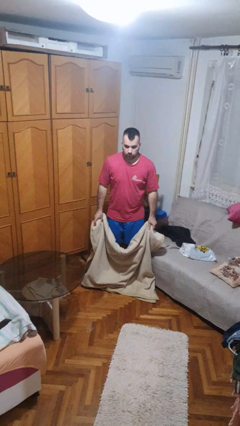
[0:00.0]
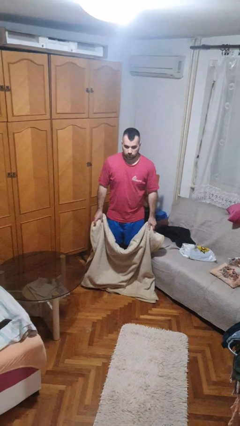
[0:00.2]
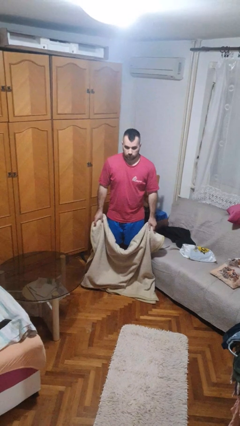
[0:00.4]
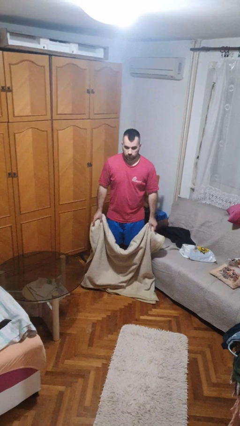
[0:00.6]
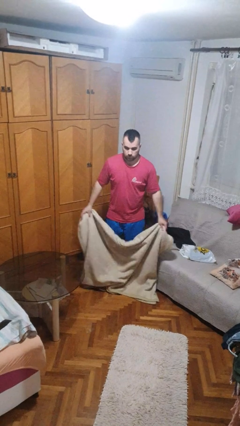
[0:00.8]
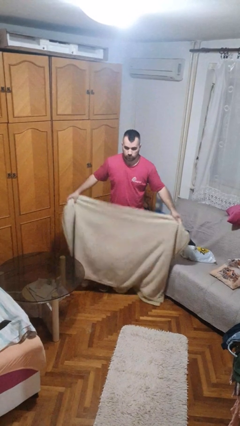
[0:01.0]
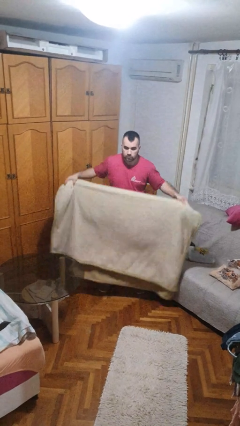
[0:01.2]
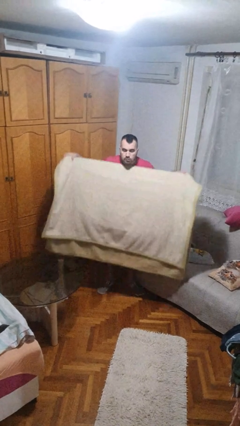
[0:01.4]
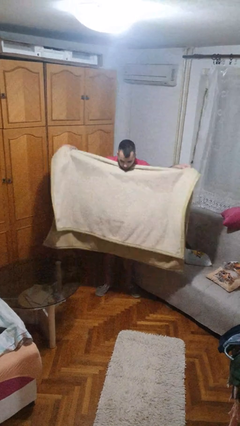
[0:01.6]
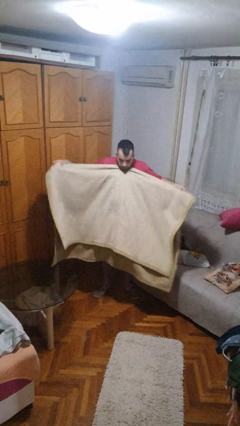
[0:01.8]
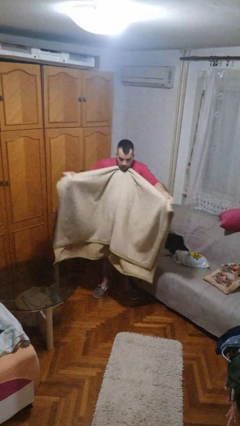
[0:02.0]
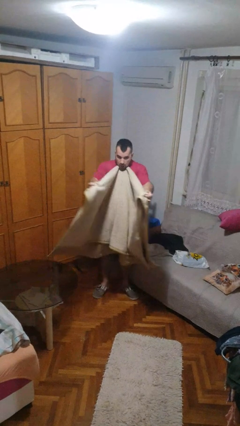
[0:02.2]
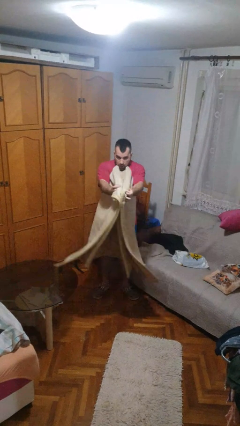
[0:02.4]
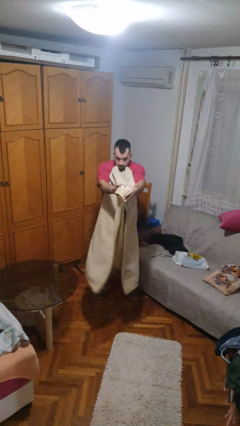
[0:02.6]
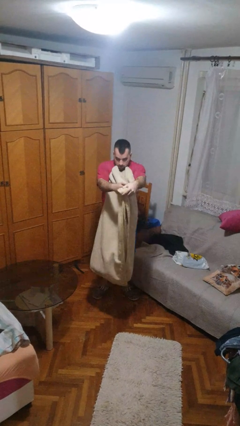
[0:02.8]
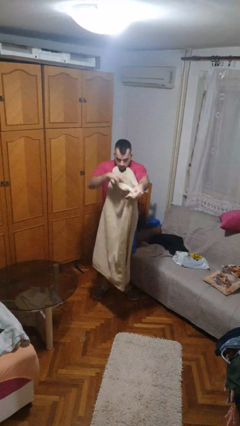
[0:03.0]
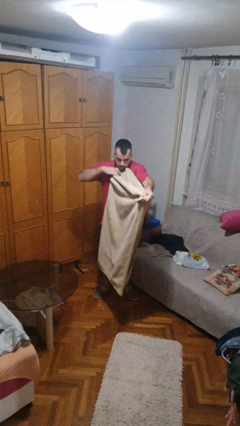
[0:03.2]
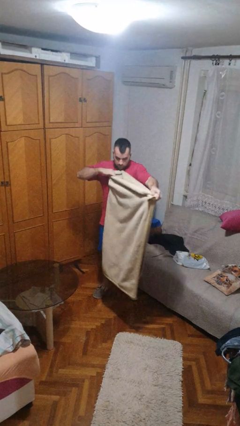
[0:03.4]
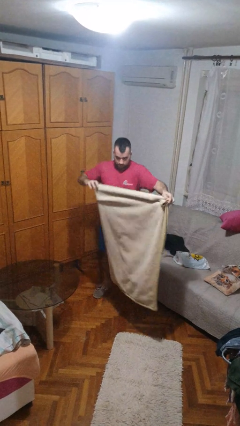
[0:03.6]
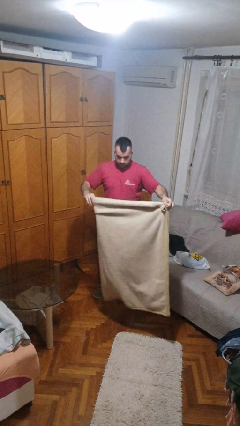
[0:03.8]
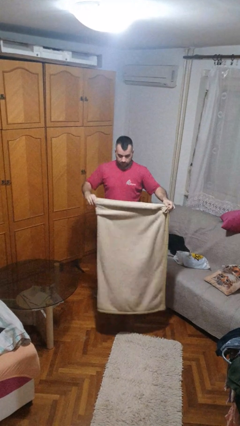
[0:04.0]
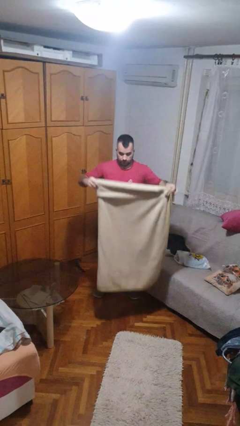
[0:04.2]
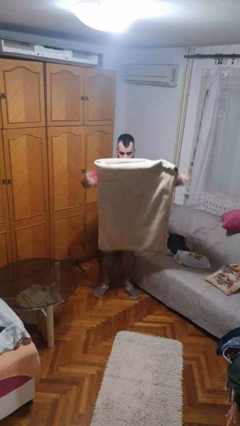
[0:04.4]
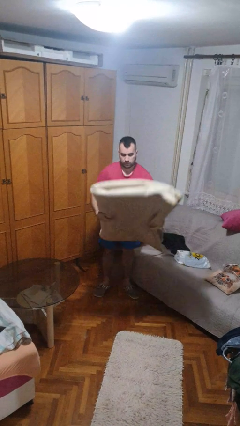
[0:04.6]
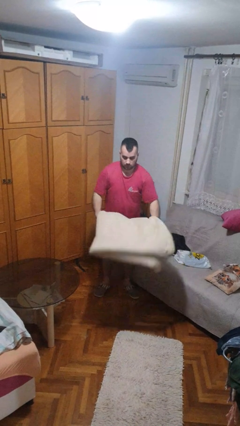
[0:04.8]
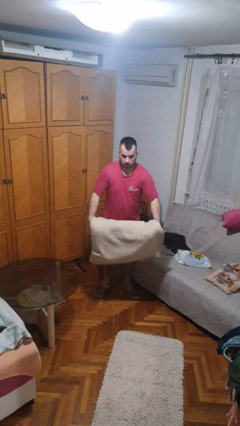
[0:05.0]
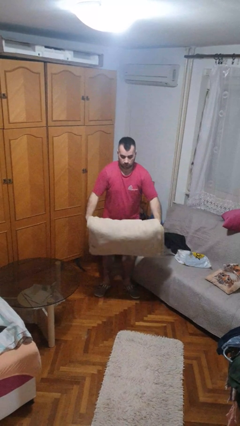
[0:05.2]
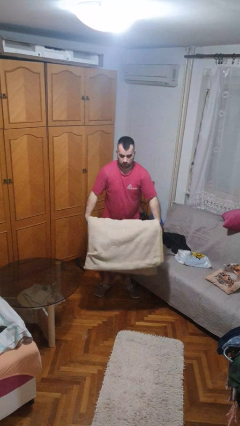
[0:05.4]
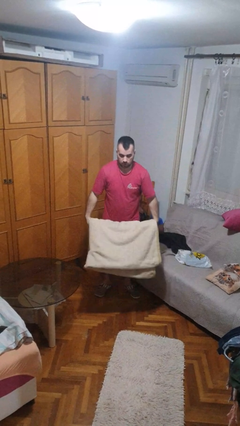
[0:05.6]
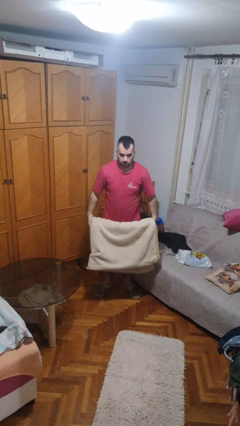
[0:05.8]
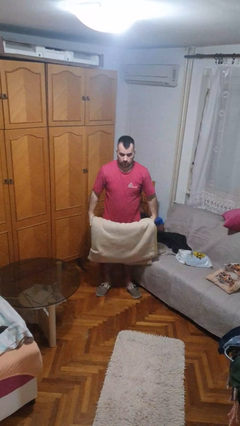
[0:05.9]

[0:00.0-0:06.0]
person folds blanket

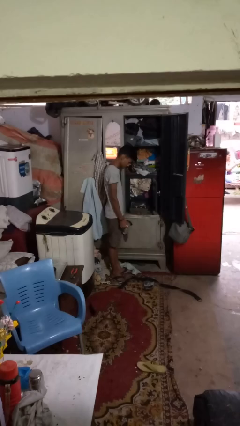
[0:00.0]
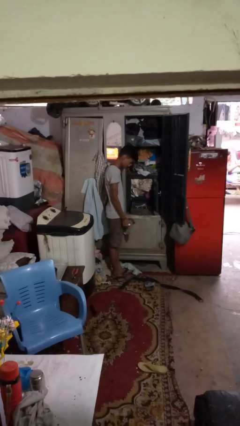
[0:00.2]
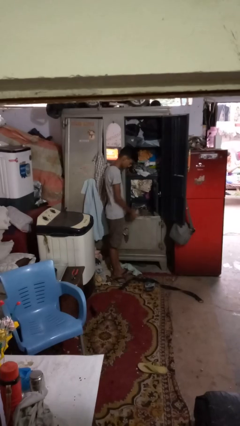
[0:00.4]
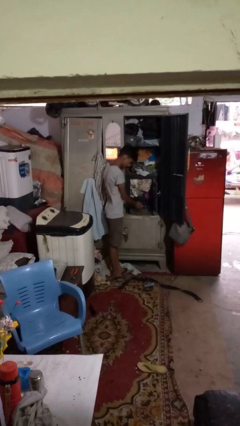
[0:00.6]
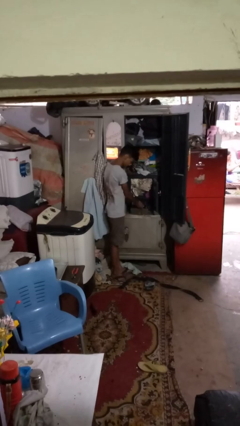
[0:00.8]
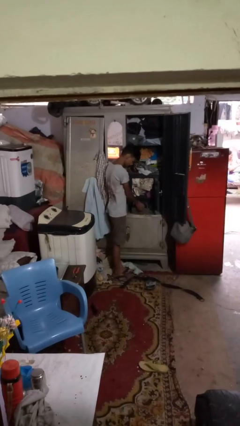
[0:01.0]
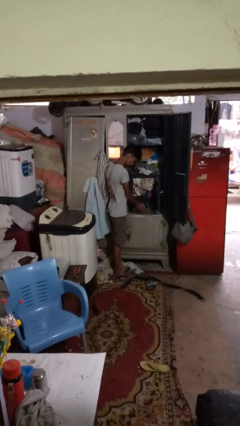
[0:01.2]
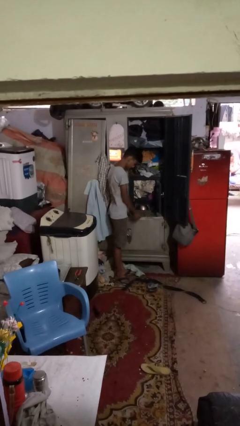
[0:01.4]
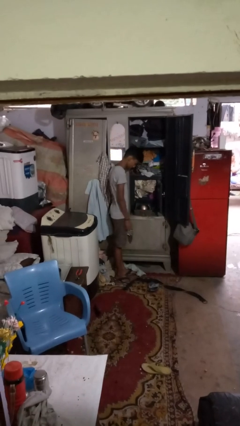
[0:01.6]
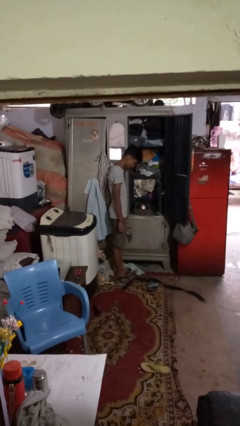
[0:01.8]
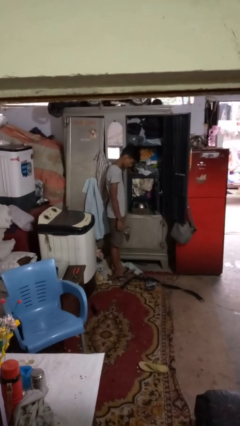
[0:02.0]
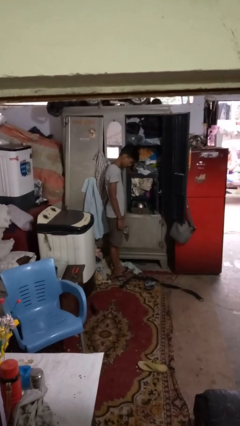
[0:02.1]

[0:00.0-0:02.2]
person puts clothes into dresser

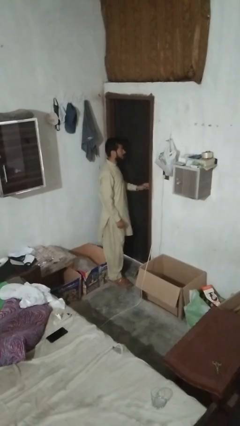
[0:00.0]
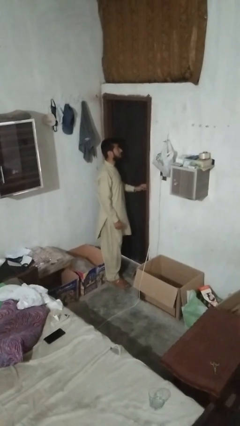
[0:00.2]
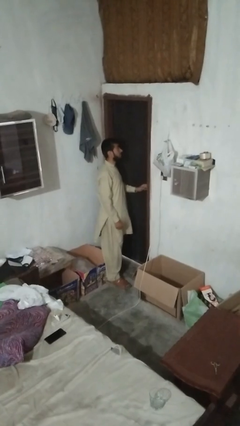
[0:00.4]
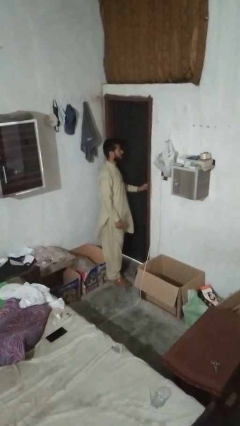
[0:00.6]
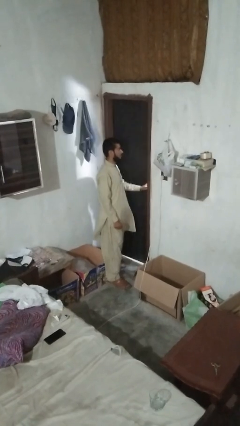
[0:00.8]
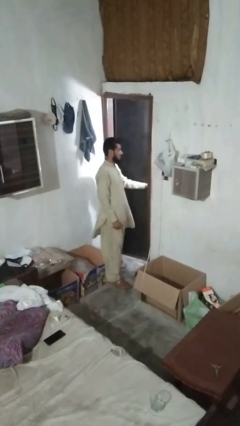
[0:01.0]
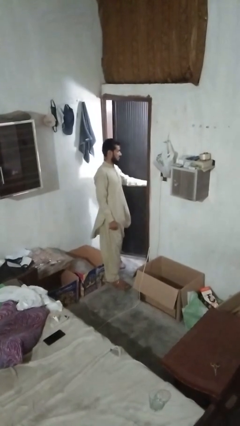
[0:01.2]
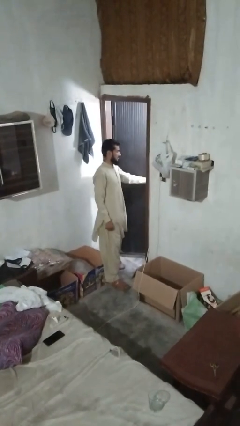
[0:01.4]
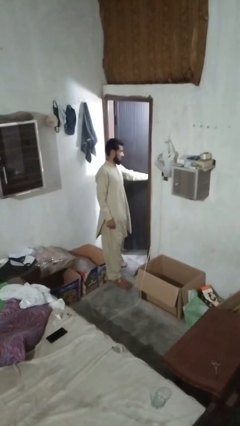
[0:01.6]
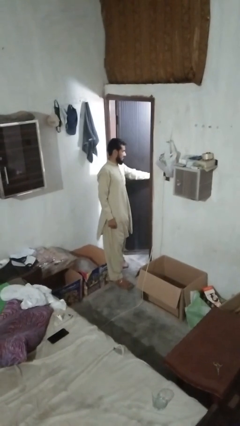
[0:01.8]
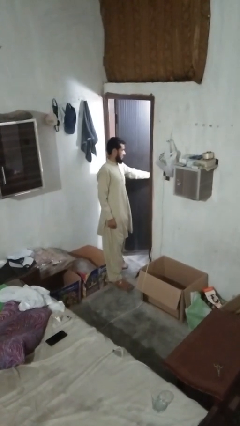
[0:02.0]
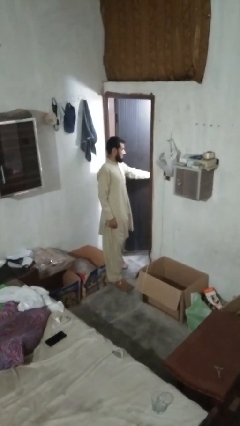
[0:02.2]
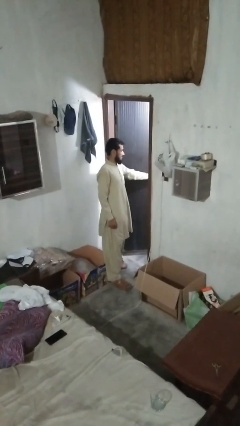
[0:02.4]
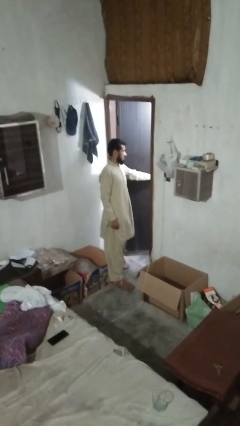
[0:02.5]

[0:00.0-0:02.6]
person opens facility door

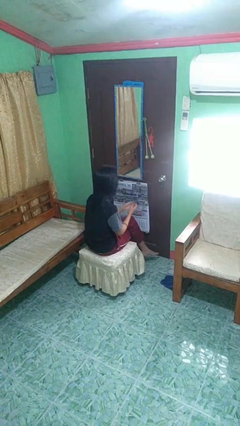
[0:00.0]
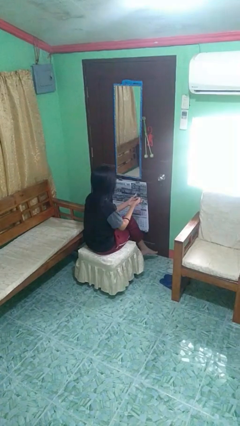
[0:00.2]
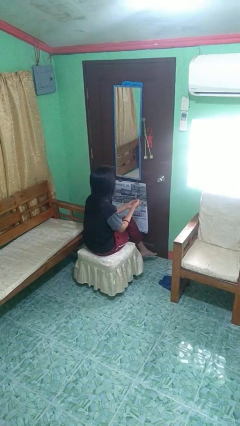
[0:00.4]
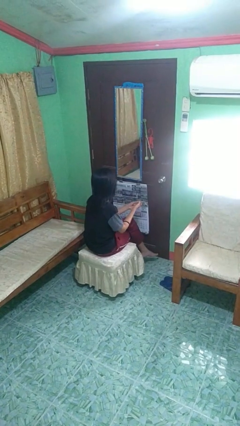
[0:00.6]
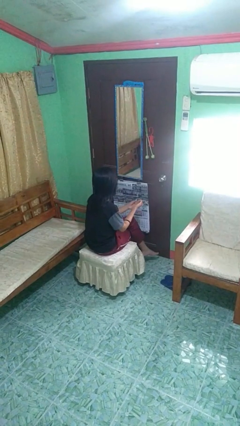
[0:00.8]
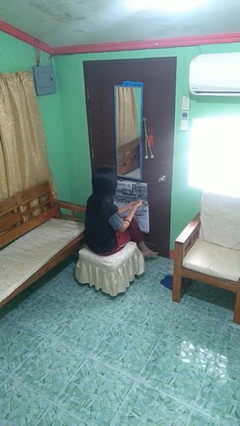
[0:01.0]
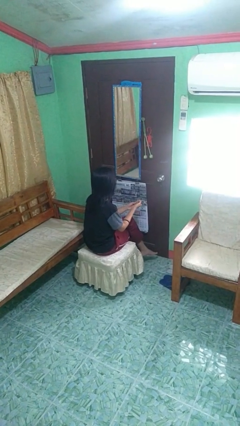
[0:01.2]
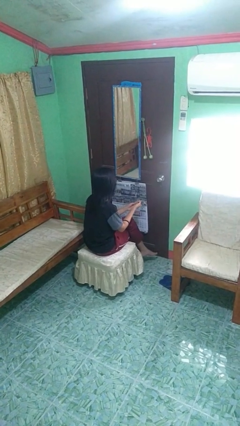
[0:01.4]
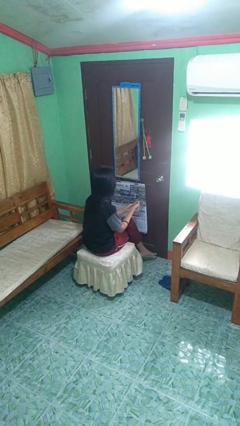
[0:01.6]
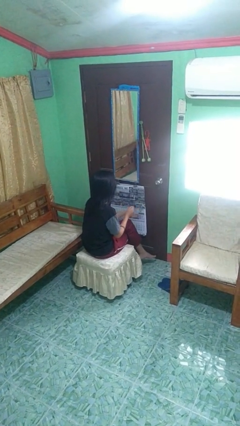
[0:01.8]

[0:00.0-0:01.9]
person cracks knuckles

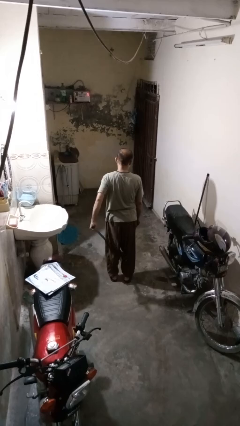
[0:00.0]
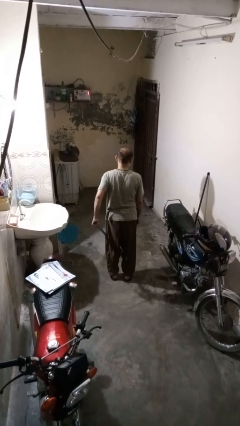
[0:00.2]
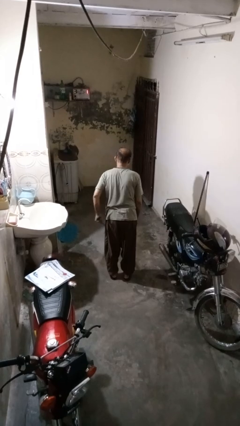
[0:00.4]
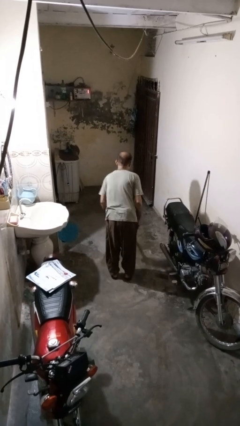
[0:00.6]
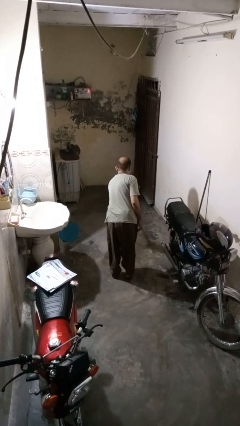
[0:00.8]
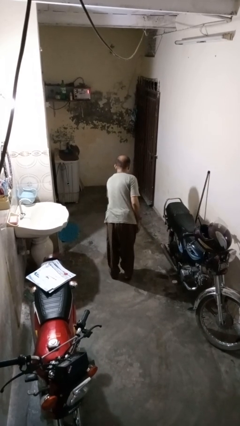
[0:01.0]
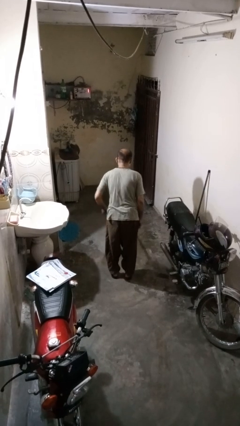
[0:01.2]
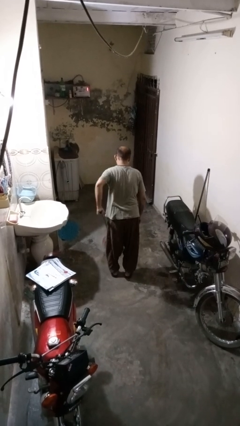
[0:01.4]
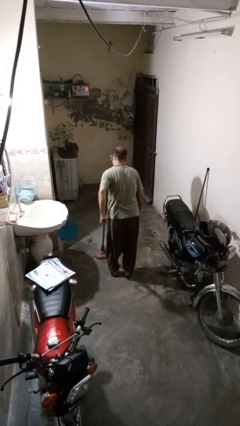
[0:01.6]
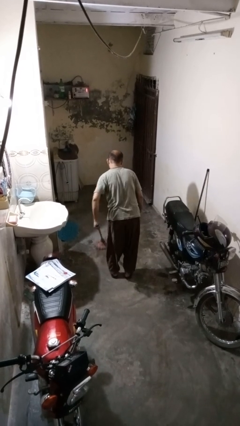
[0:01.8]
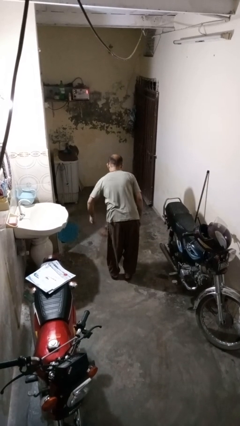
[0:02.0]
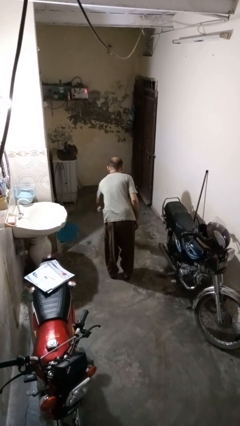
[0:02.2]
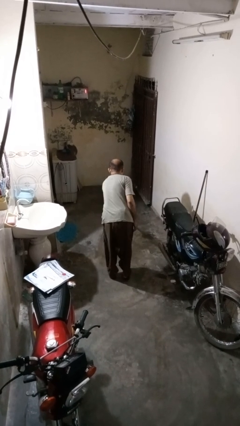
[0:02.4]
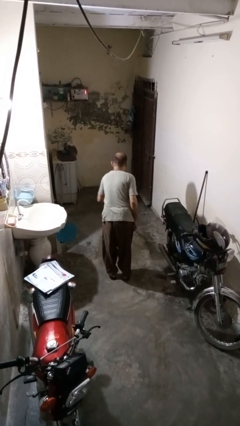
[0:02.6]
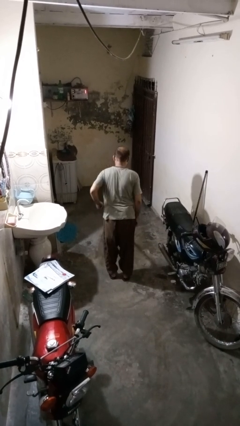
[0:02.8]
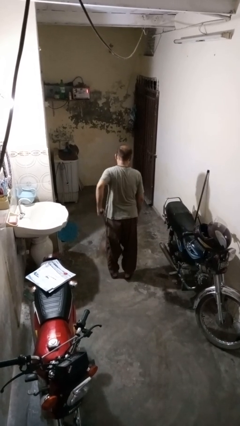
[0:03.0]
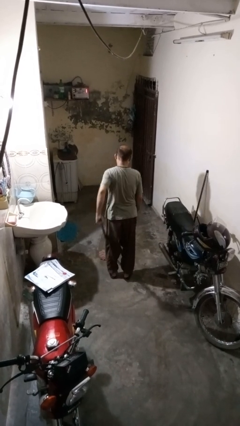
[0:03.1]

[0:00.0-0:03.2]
person mops

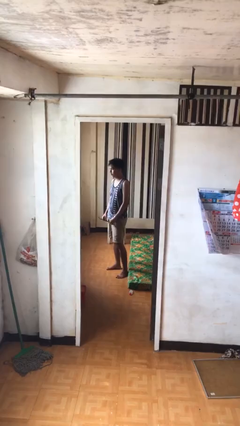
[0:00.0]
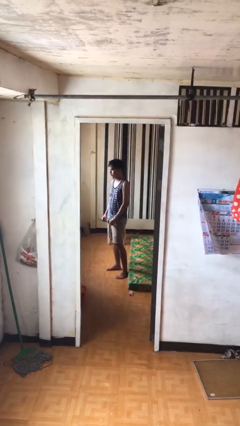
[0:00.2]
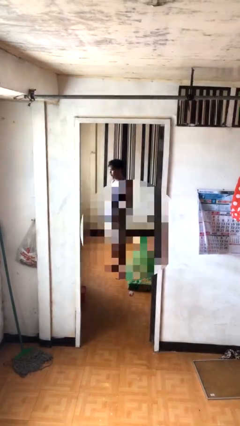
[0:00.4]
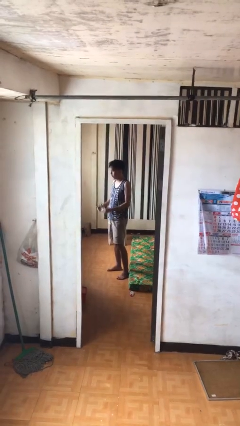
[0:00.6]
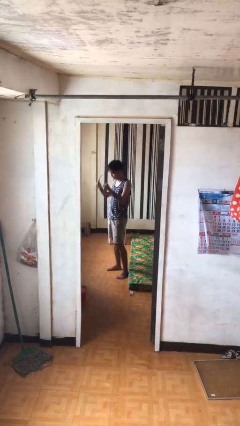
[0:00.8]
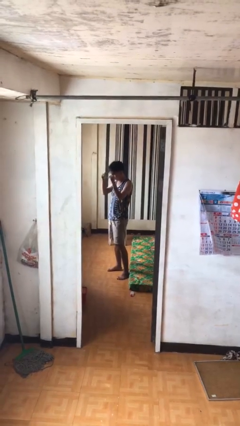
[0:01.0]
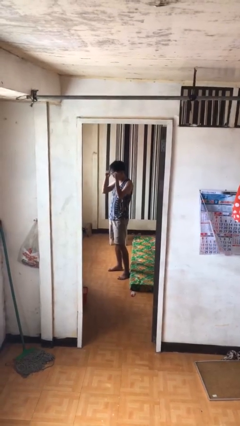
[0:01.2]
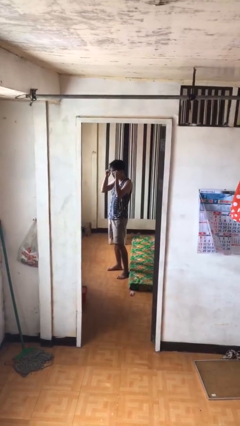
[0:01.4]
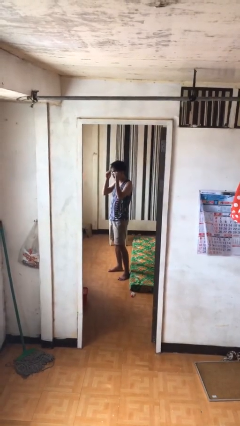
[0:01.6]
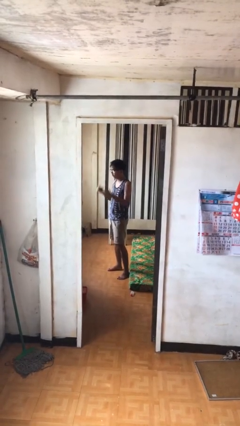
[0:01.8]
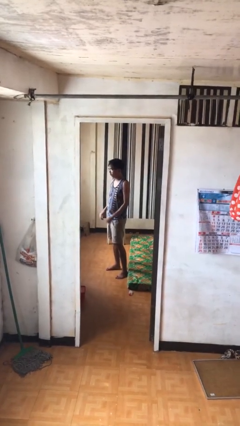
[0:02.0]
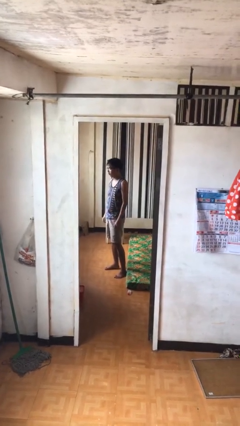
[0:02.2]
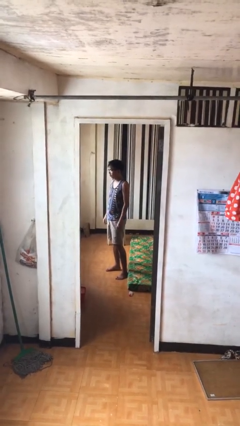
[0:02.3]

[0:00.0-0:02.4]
person puts on glasses
